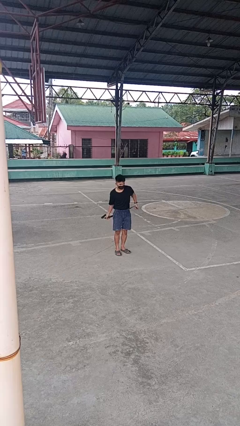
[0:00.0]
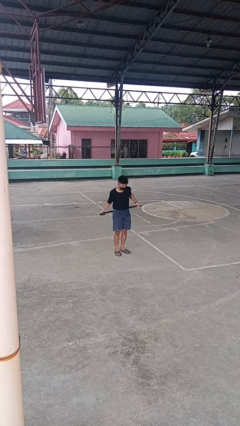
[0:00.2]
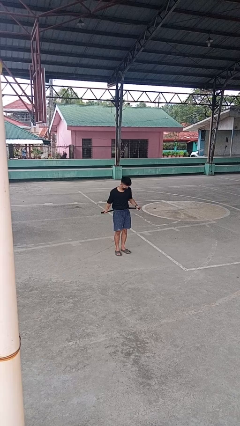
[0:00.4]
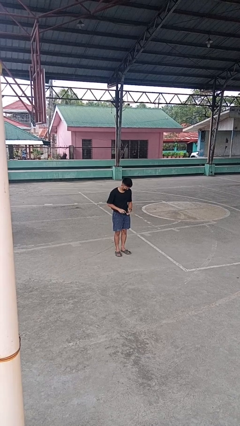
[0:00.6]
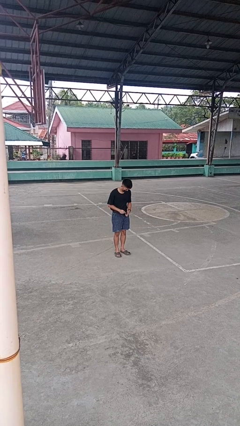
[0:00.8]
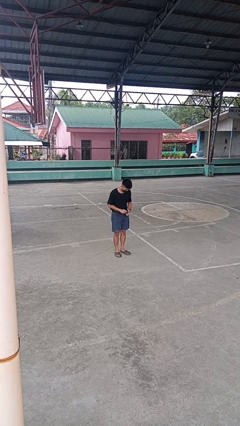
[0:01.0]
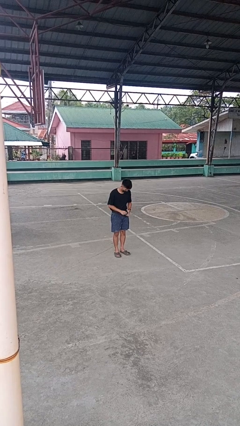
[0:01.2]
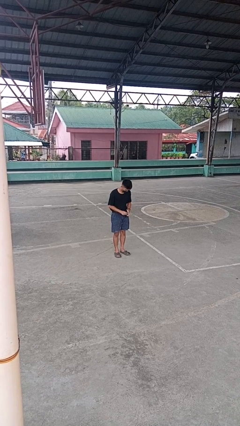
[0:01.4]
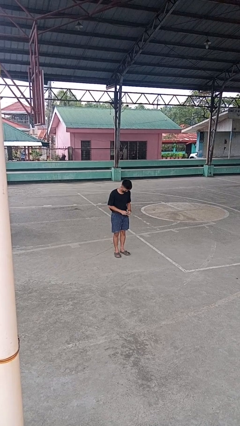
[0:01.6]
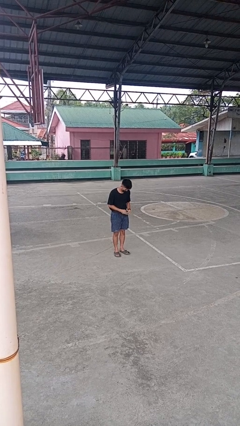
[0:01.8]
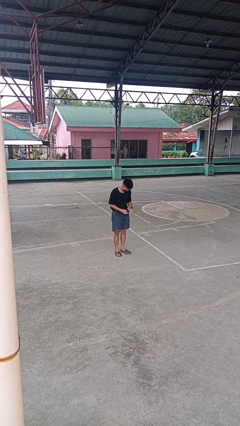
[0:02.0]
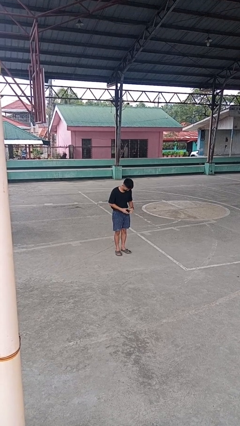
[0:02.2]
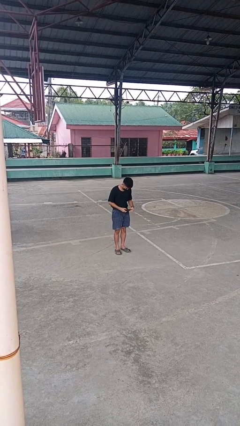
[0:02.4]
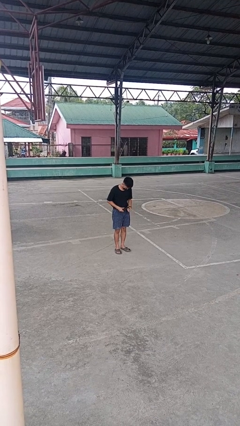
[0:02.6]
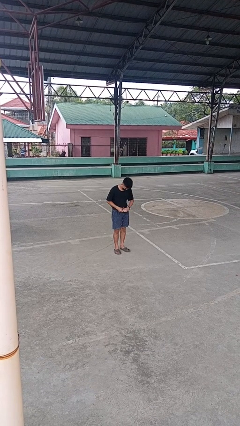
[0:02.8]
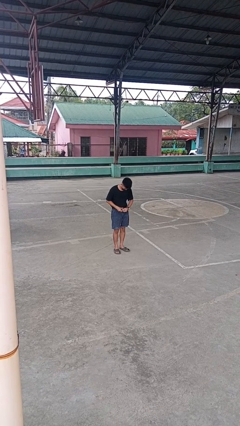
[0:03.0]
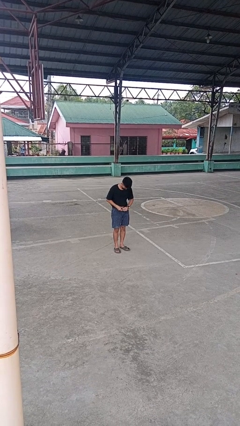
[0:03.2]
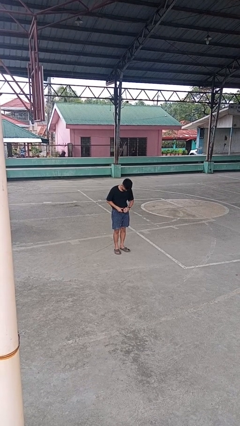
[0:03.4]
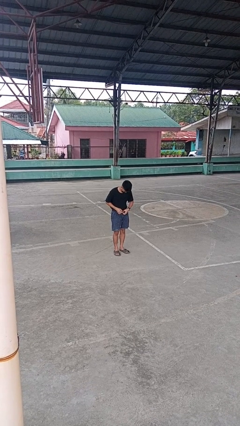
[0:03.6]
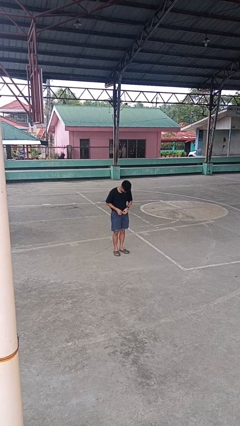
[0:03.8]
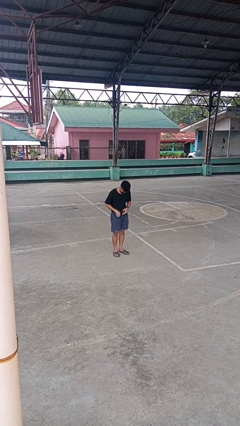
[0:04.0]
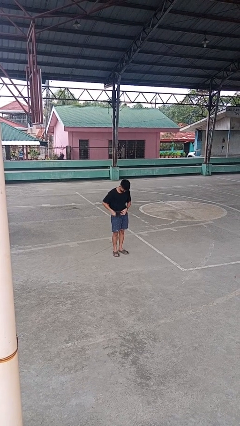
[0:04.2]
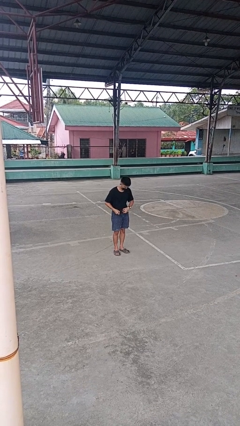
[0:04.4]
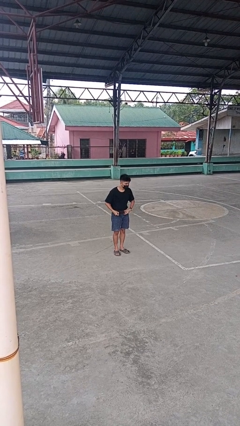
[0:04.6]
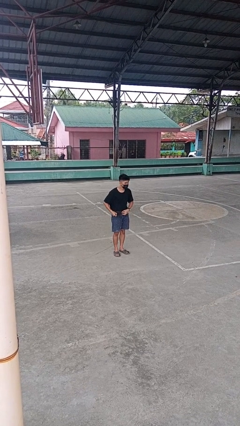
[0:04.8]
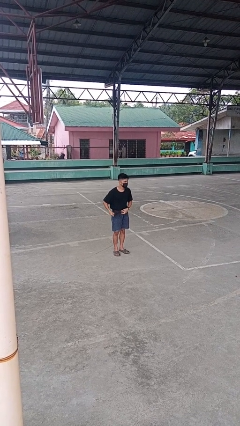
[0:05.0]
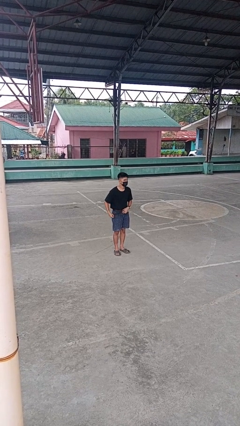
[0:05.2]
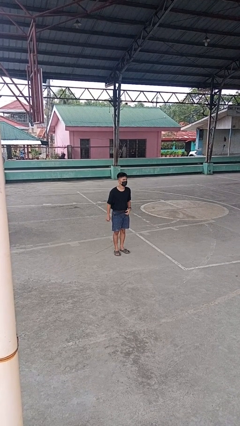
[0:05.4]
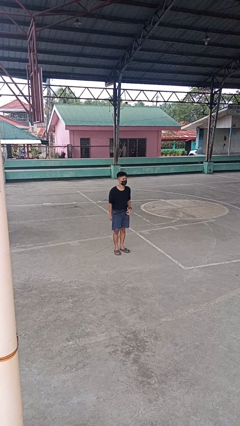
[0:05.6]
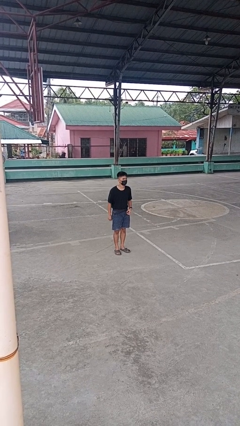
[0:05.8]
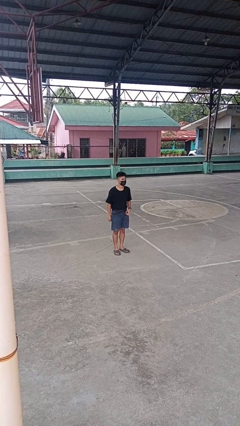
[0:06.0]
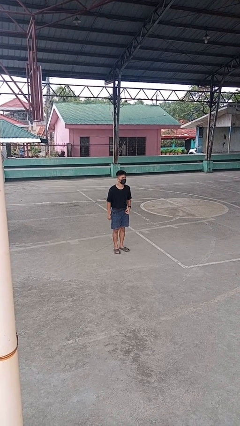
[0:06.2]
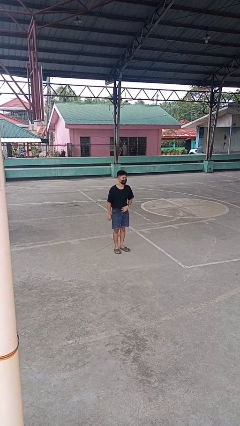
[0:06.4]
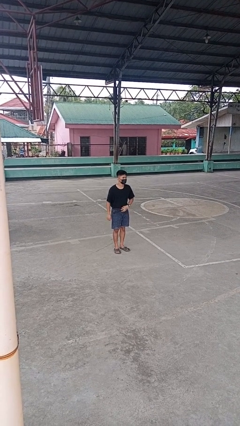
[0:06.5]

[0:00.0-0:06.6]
person puts on belt

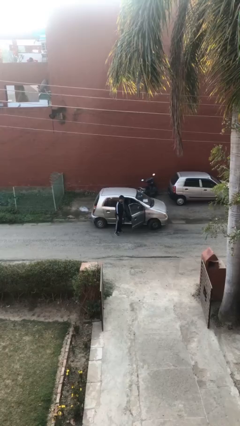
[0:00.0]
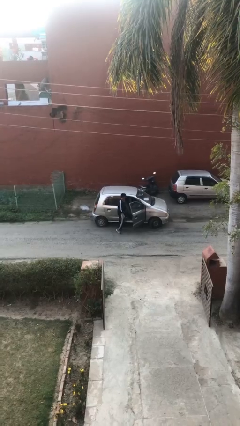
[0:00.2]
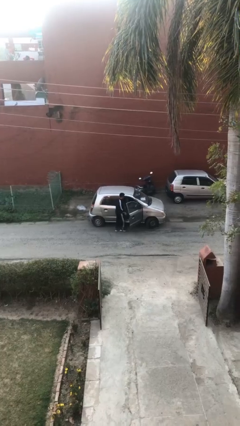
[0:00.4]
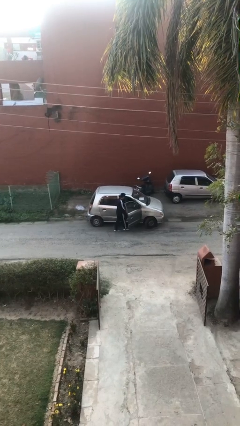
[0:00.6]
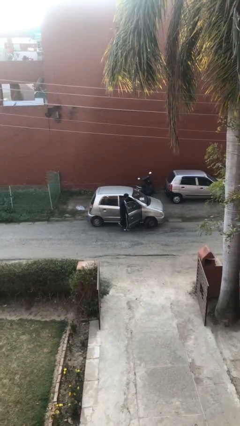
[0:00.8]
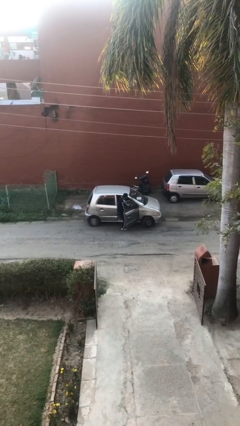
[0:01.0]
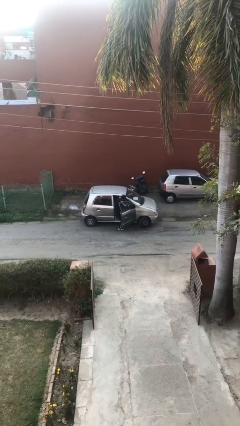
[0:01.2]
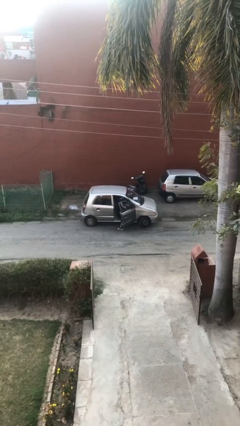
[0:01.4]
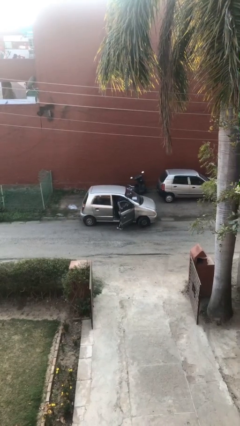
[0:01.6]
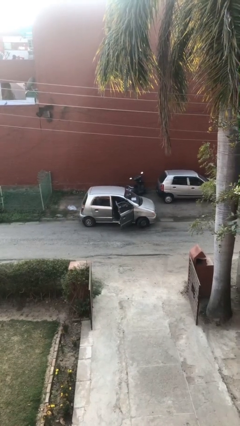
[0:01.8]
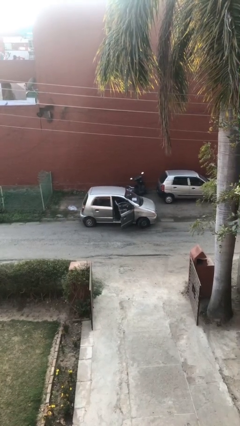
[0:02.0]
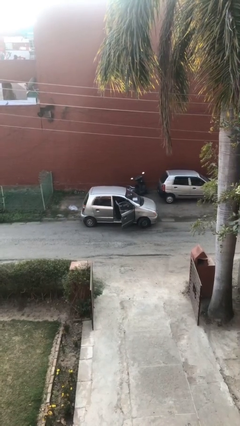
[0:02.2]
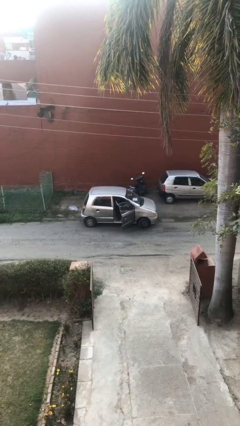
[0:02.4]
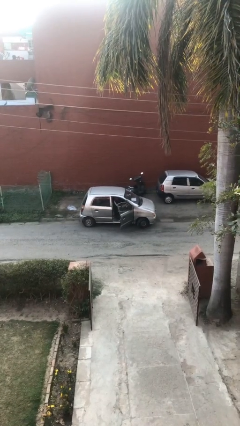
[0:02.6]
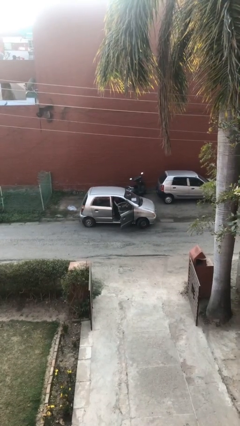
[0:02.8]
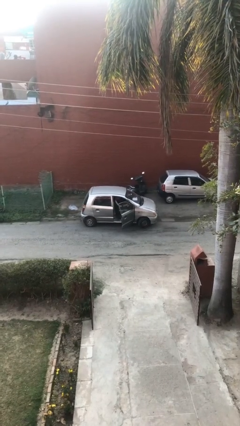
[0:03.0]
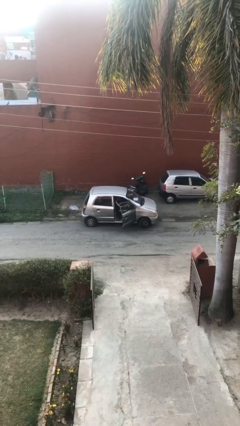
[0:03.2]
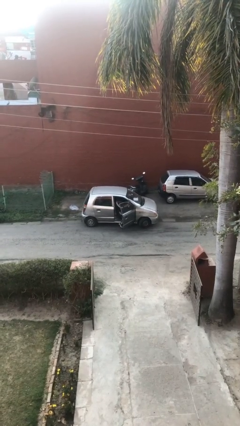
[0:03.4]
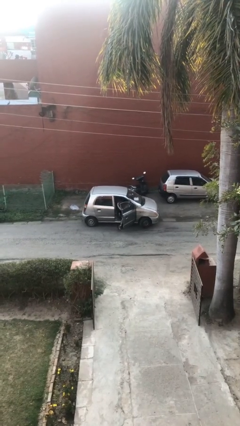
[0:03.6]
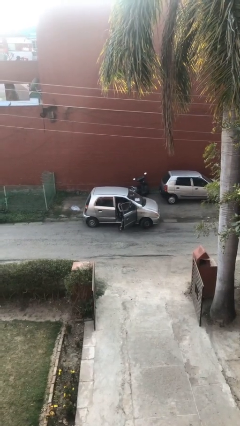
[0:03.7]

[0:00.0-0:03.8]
person enters car

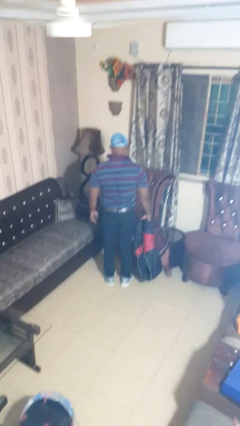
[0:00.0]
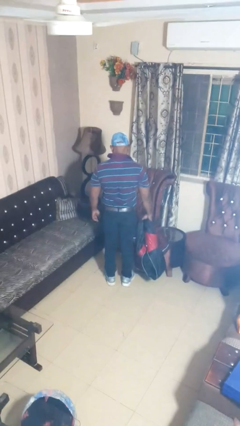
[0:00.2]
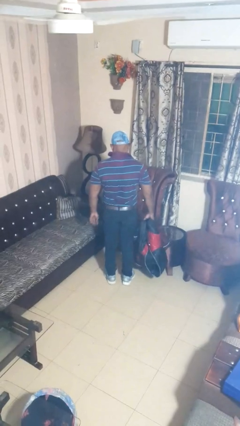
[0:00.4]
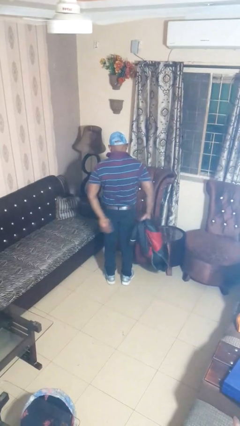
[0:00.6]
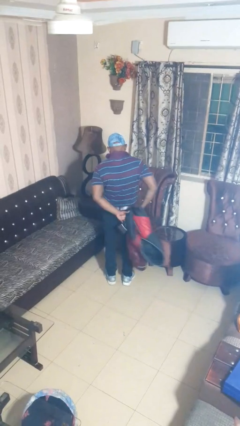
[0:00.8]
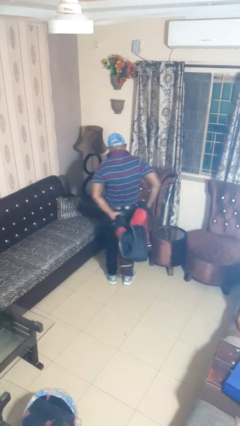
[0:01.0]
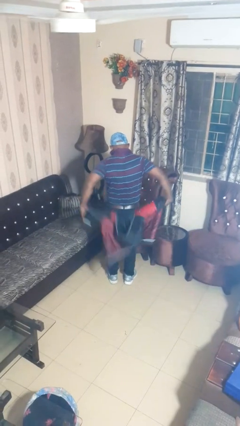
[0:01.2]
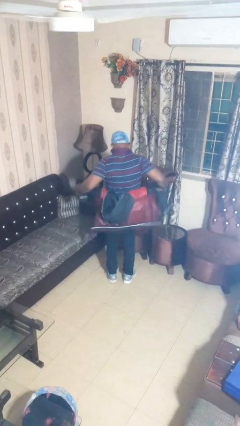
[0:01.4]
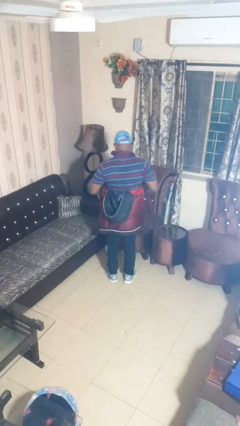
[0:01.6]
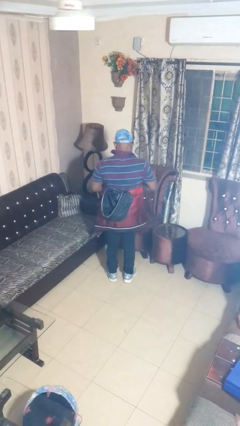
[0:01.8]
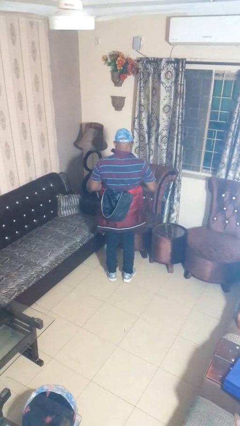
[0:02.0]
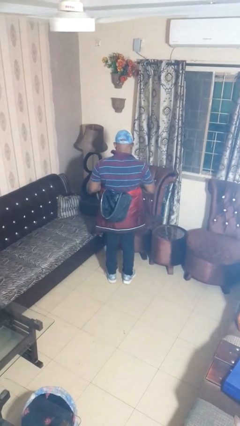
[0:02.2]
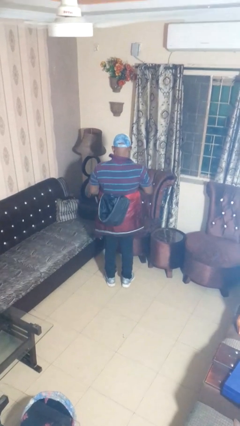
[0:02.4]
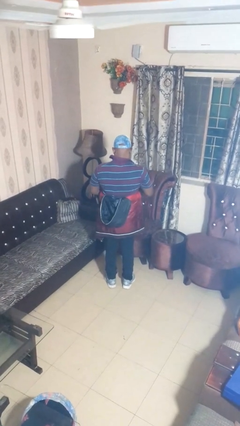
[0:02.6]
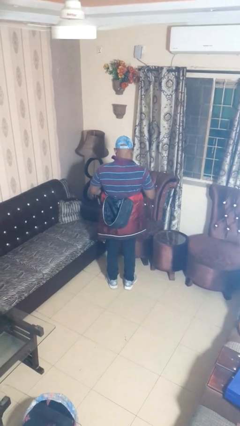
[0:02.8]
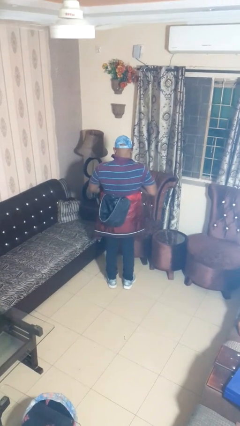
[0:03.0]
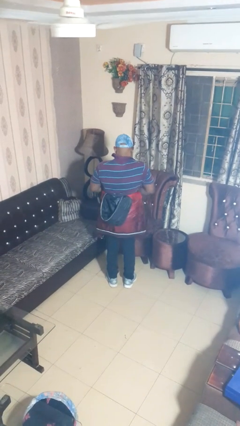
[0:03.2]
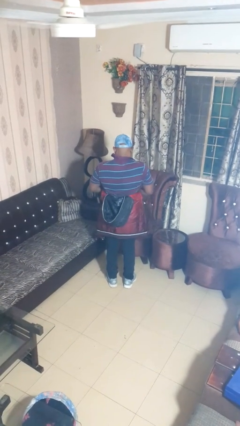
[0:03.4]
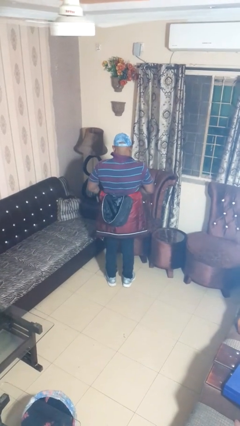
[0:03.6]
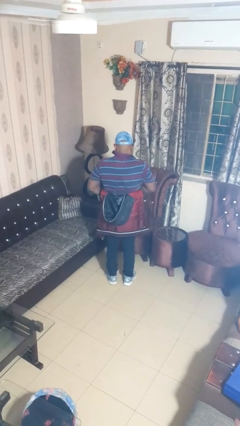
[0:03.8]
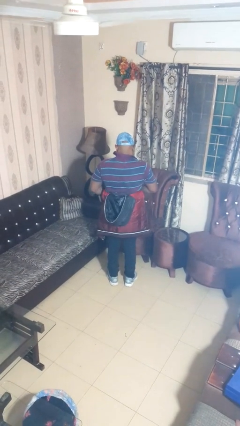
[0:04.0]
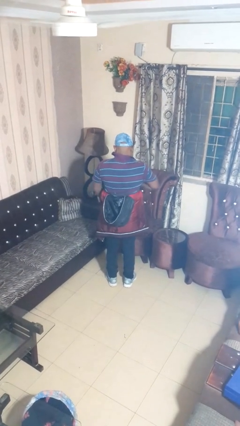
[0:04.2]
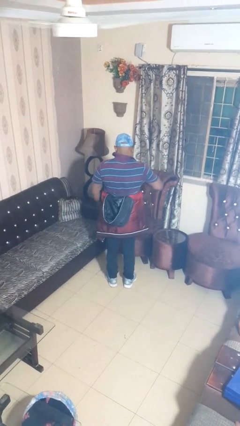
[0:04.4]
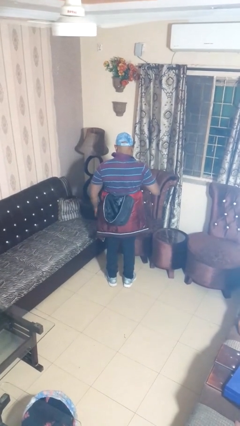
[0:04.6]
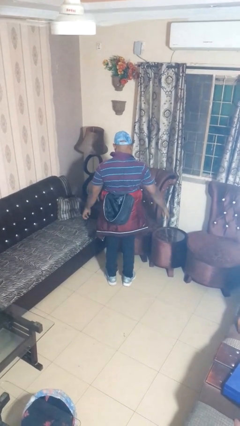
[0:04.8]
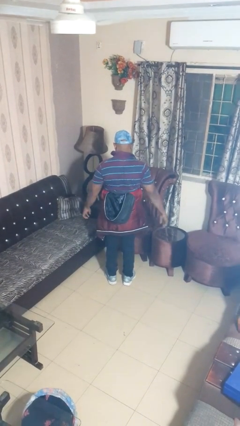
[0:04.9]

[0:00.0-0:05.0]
person ties jacket around waist

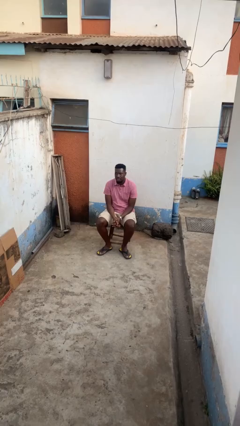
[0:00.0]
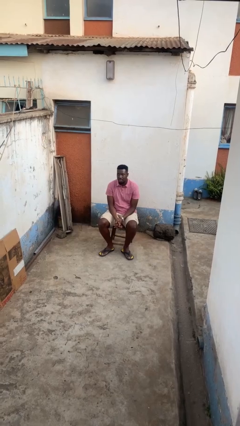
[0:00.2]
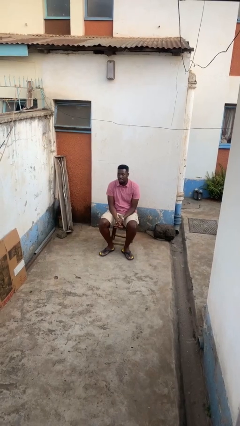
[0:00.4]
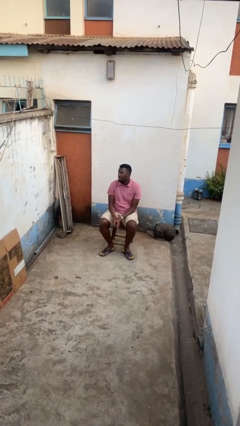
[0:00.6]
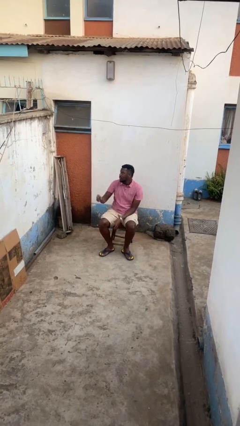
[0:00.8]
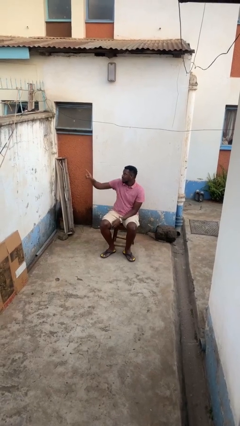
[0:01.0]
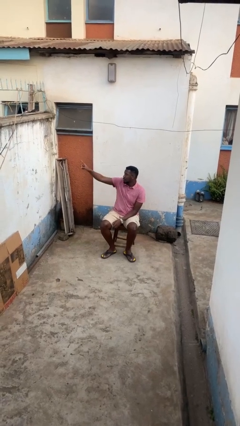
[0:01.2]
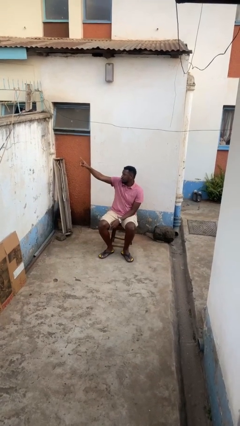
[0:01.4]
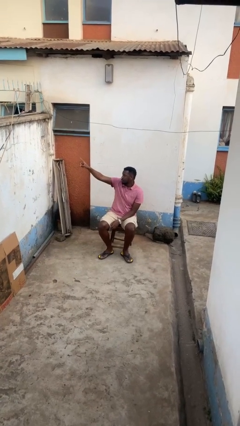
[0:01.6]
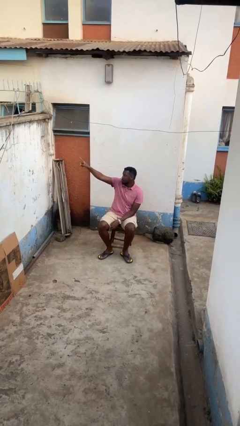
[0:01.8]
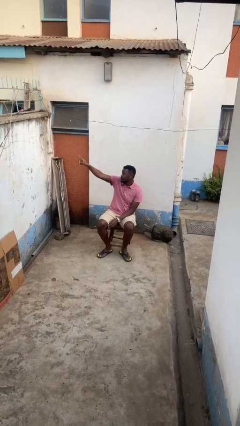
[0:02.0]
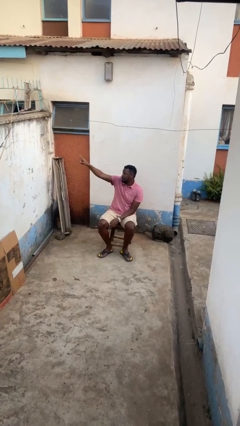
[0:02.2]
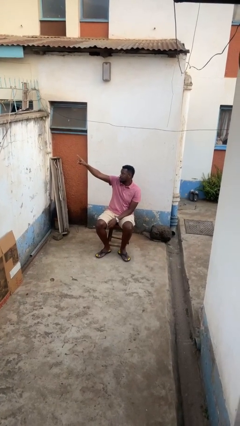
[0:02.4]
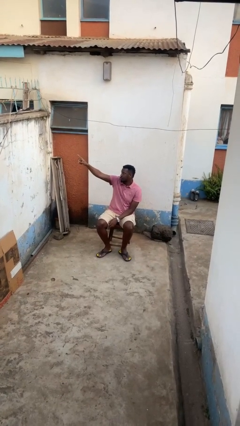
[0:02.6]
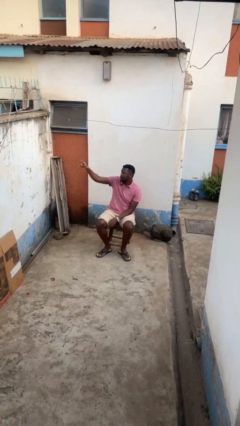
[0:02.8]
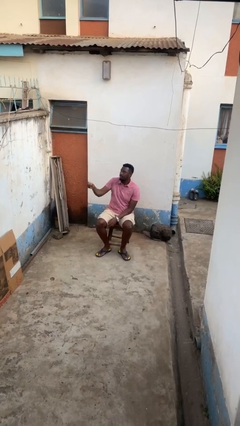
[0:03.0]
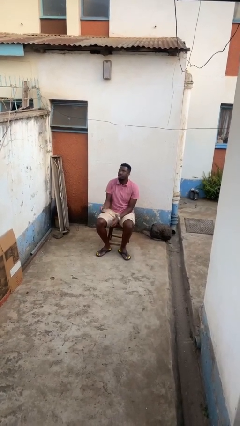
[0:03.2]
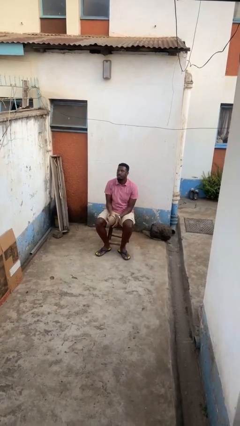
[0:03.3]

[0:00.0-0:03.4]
person points at person
